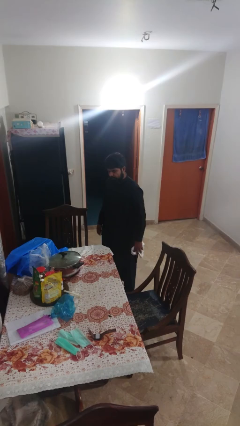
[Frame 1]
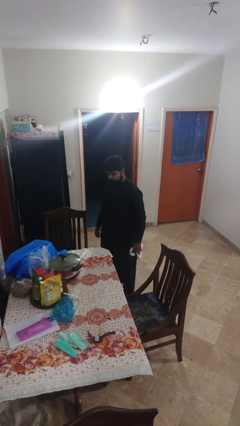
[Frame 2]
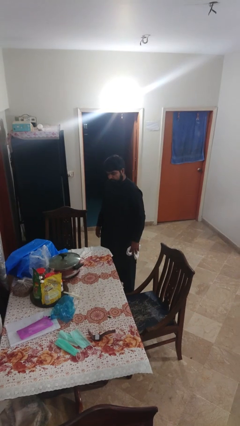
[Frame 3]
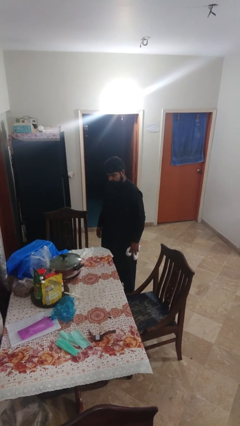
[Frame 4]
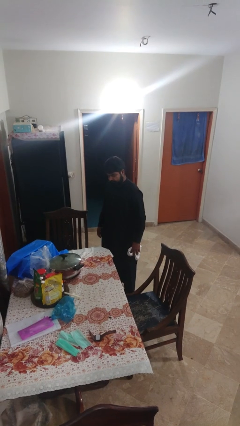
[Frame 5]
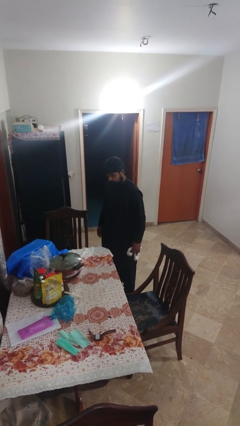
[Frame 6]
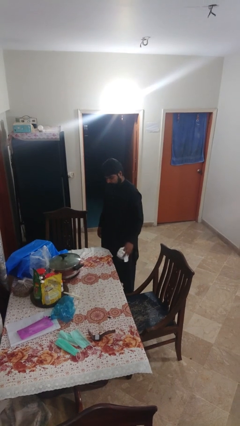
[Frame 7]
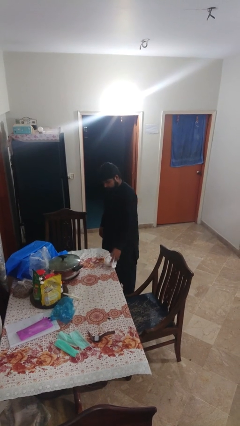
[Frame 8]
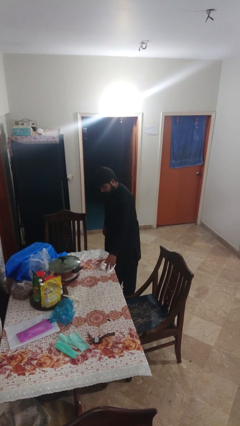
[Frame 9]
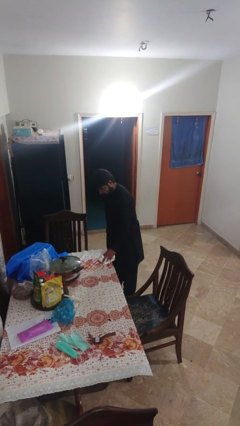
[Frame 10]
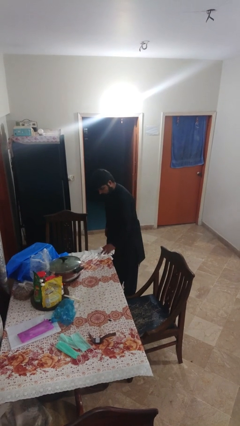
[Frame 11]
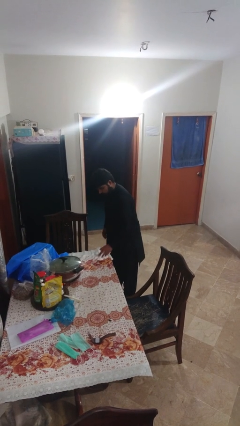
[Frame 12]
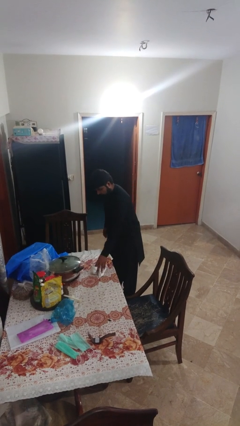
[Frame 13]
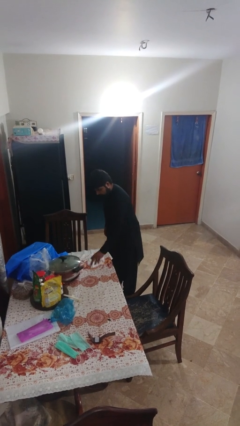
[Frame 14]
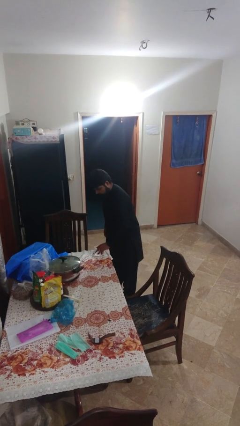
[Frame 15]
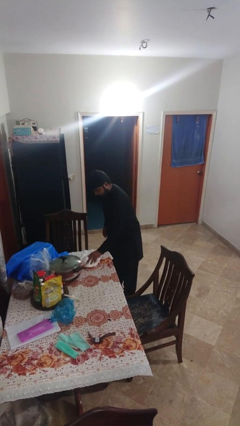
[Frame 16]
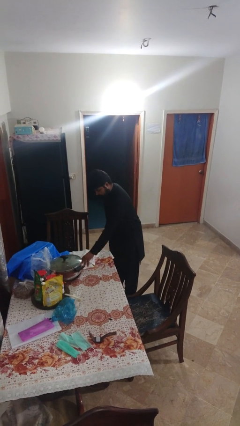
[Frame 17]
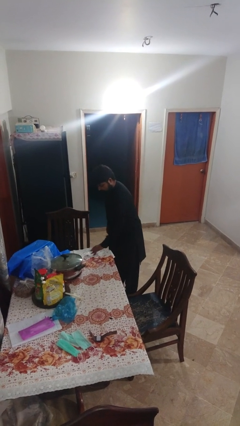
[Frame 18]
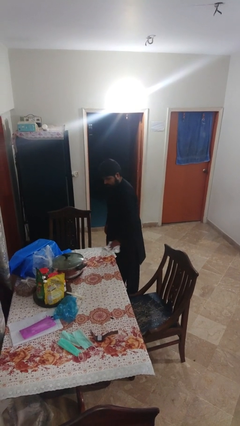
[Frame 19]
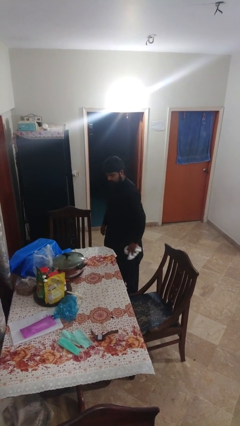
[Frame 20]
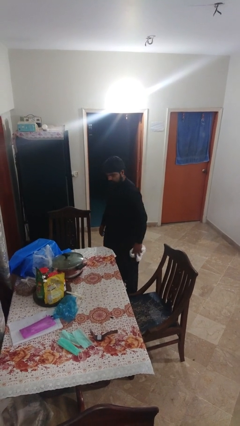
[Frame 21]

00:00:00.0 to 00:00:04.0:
person cleans table with rag

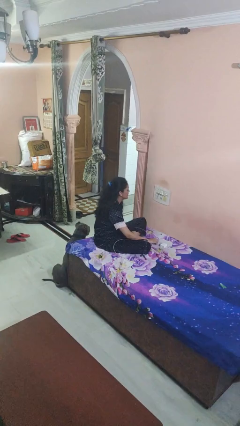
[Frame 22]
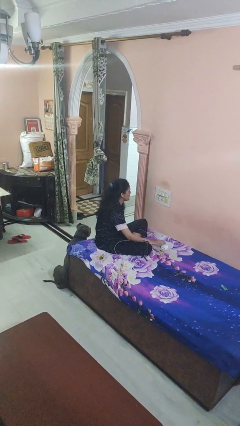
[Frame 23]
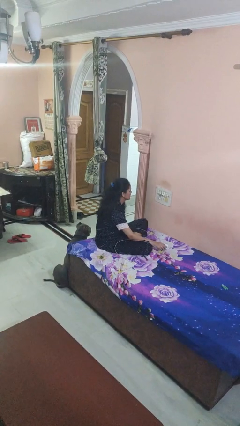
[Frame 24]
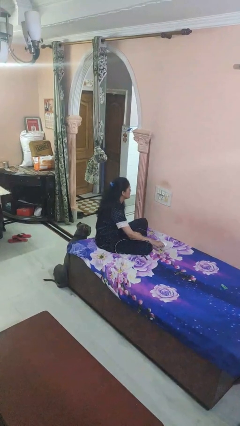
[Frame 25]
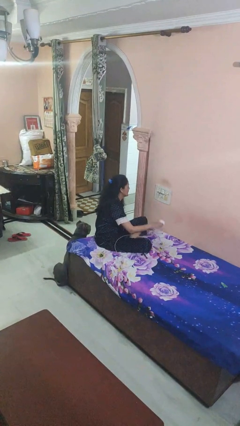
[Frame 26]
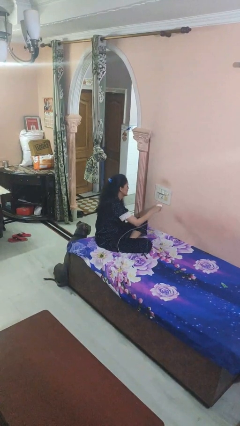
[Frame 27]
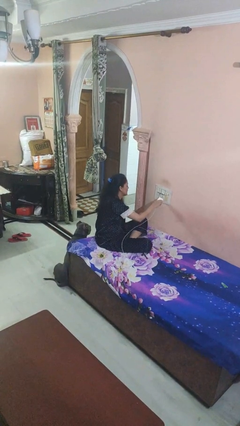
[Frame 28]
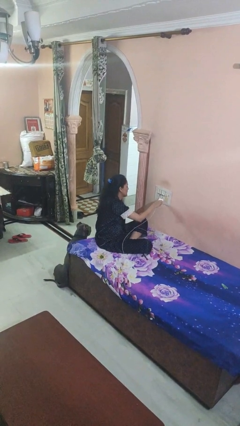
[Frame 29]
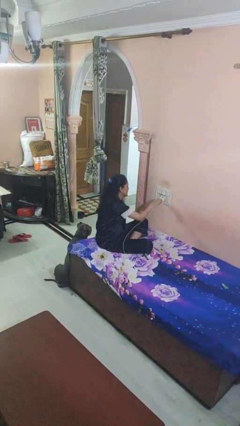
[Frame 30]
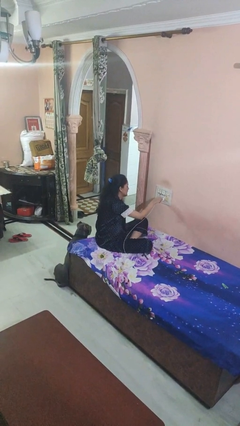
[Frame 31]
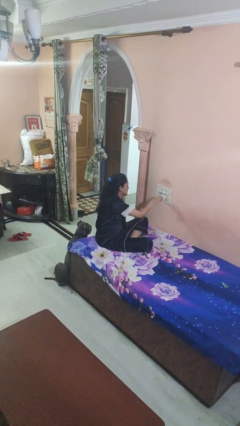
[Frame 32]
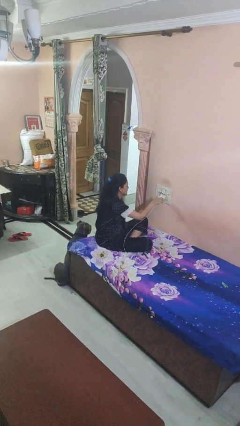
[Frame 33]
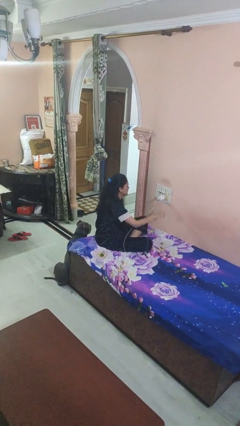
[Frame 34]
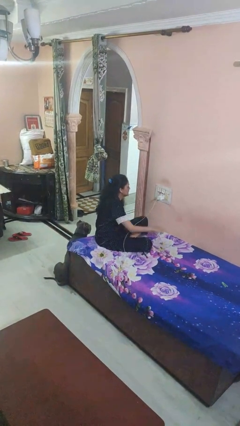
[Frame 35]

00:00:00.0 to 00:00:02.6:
person plugs into electrical socket

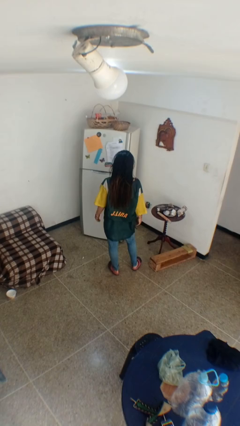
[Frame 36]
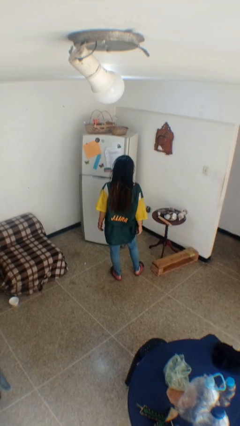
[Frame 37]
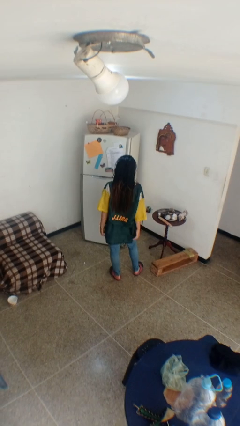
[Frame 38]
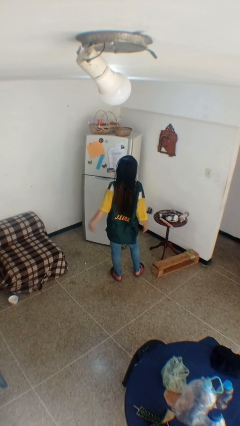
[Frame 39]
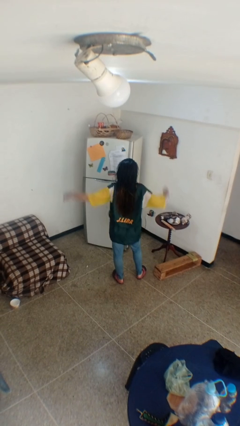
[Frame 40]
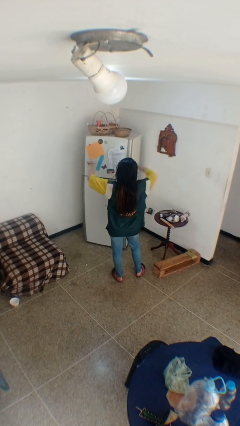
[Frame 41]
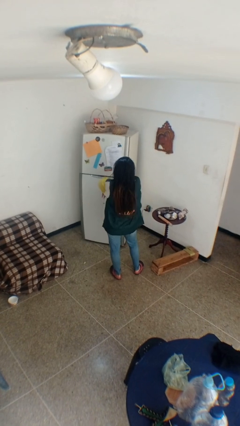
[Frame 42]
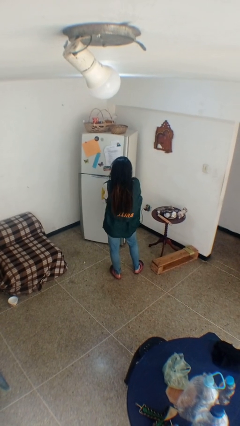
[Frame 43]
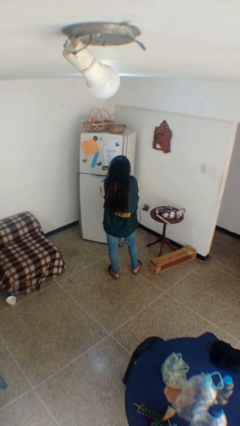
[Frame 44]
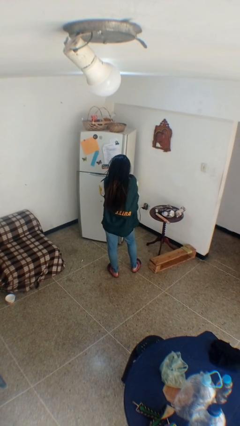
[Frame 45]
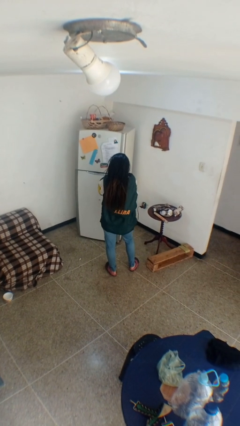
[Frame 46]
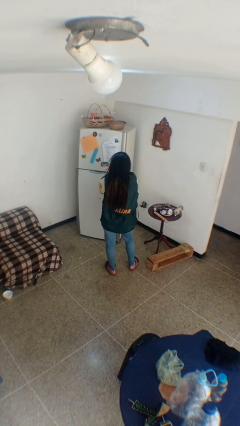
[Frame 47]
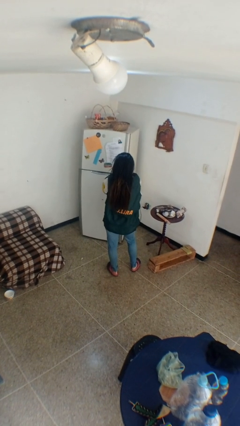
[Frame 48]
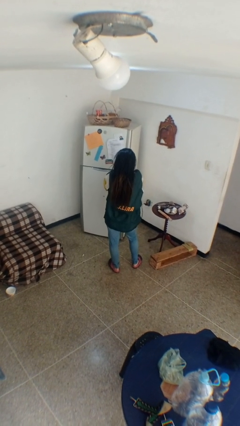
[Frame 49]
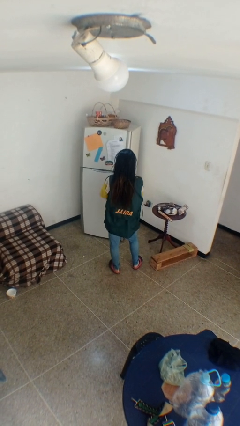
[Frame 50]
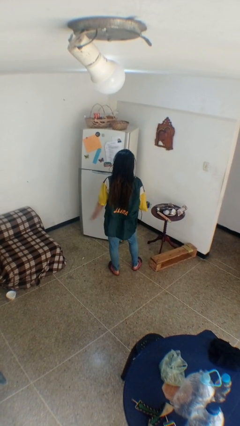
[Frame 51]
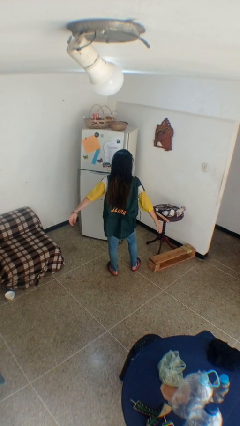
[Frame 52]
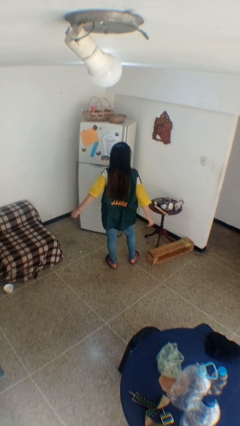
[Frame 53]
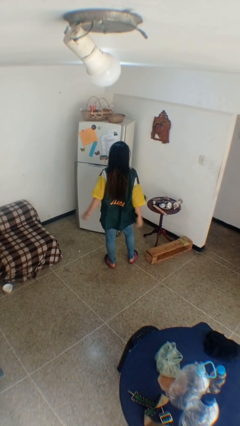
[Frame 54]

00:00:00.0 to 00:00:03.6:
person gestures arms x

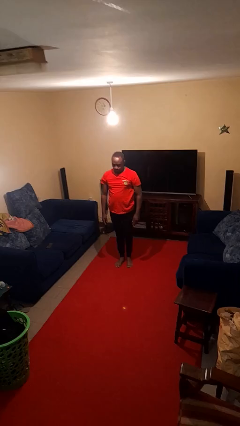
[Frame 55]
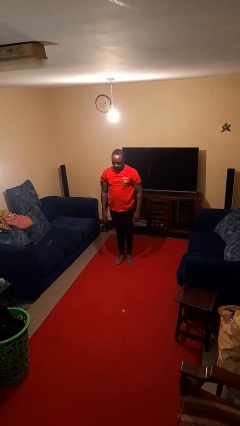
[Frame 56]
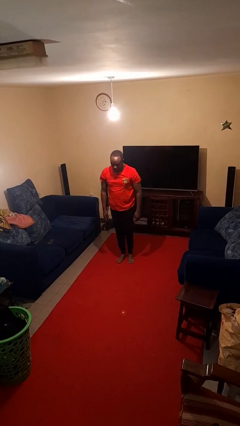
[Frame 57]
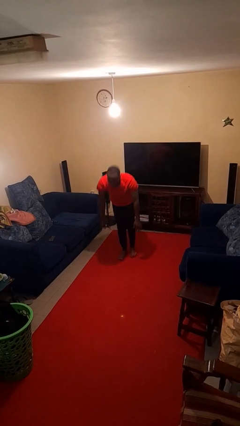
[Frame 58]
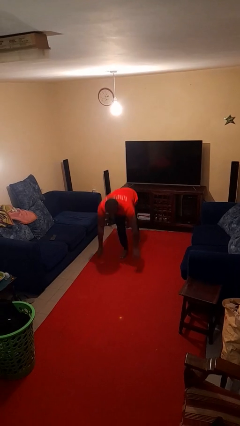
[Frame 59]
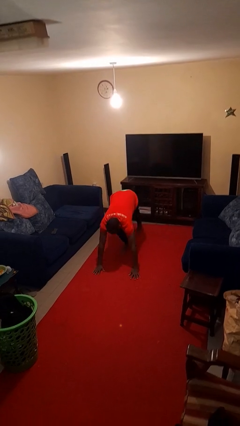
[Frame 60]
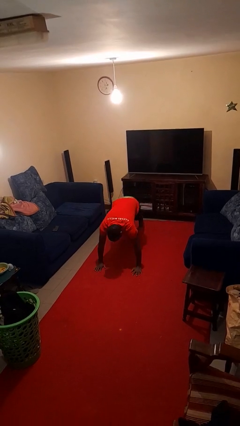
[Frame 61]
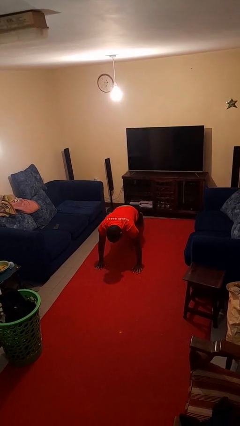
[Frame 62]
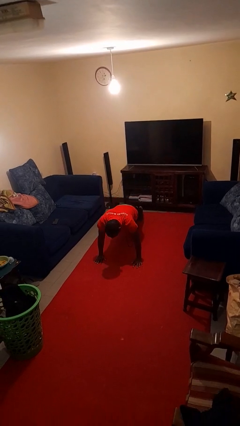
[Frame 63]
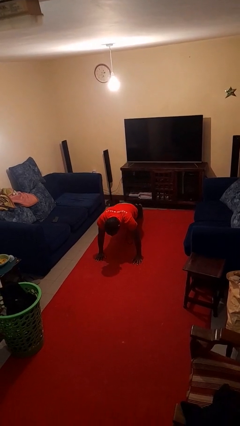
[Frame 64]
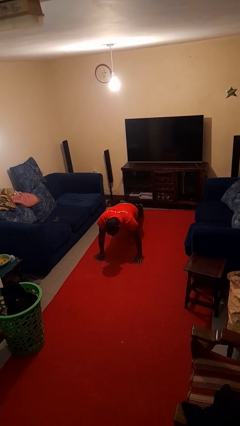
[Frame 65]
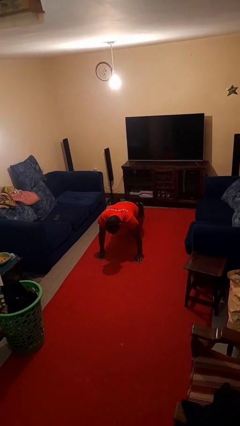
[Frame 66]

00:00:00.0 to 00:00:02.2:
person exercises with plank

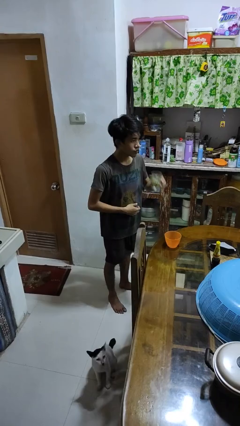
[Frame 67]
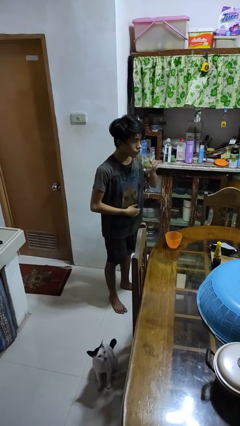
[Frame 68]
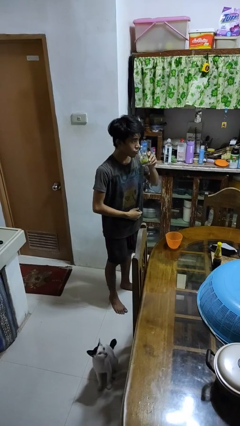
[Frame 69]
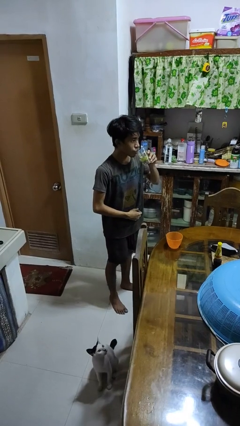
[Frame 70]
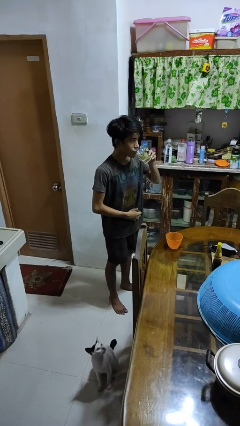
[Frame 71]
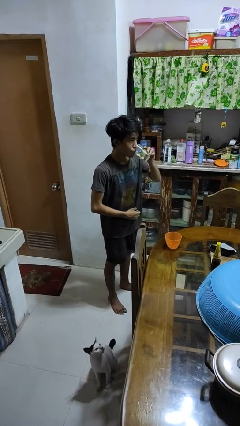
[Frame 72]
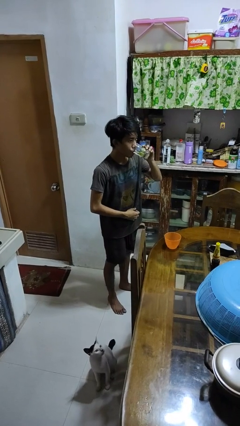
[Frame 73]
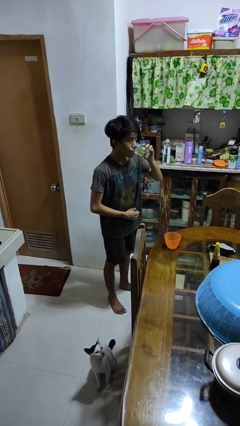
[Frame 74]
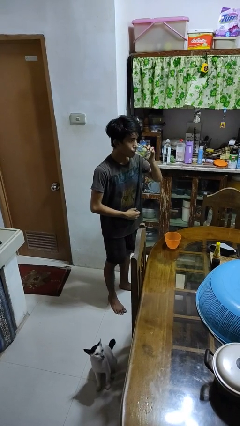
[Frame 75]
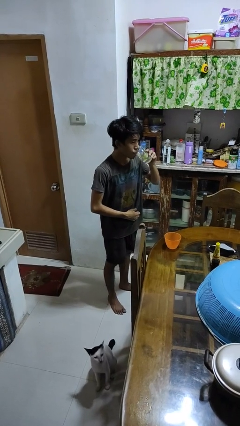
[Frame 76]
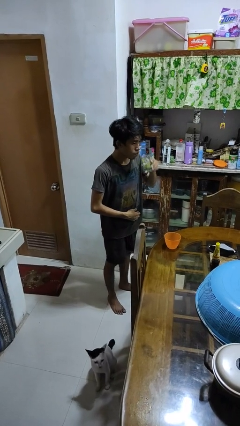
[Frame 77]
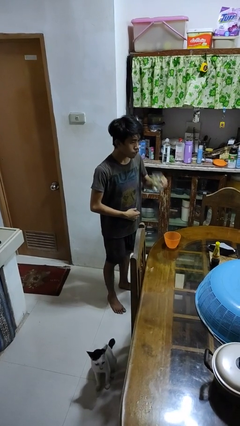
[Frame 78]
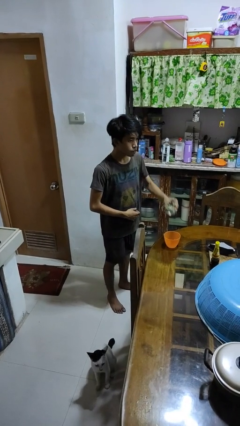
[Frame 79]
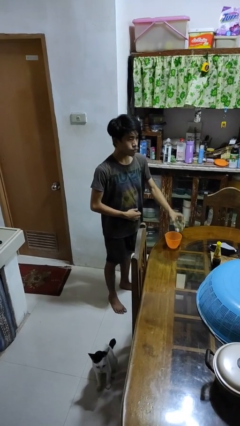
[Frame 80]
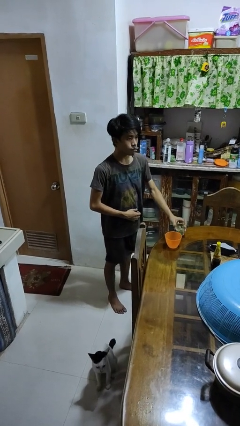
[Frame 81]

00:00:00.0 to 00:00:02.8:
person drinks from cup

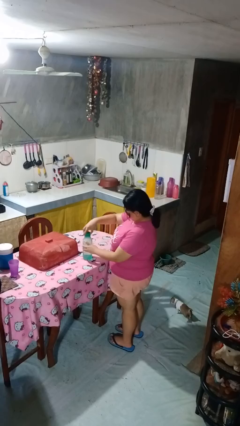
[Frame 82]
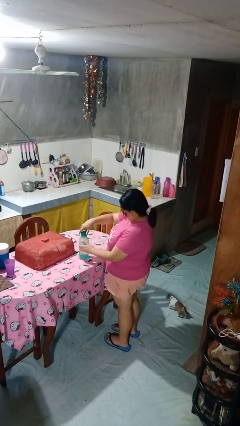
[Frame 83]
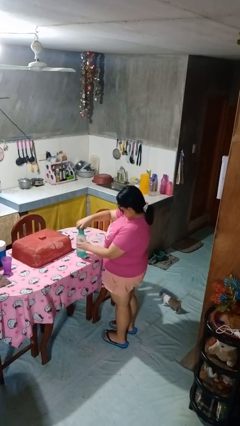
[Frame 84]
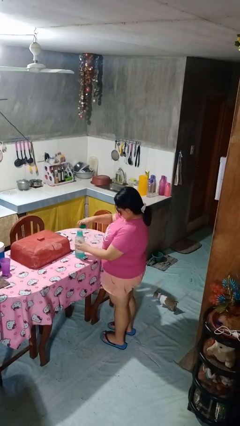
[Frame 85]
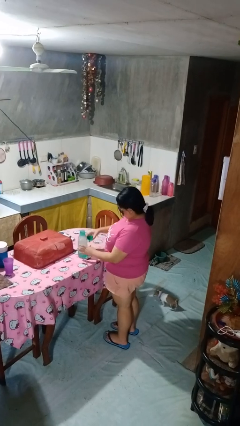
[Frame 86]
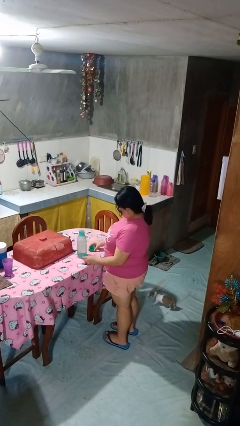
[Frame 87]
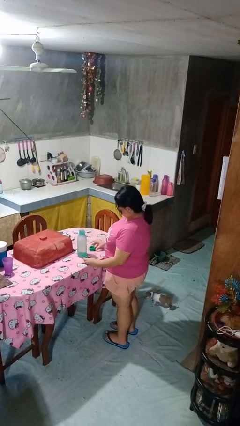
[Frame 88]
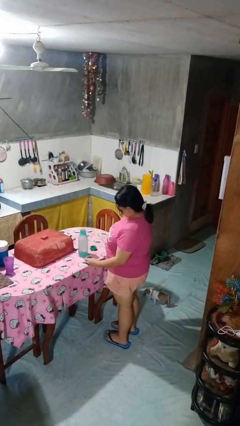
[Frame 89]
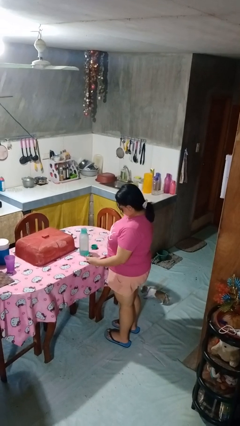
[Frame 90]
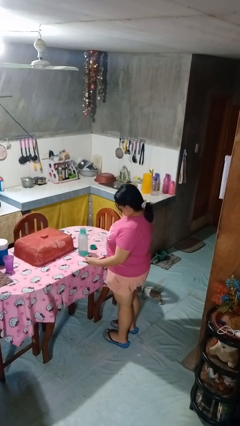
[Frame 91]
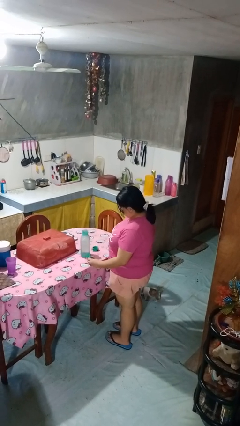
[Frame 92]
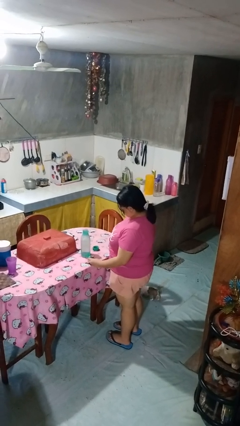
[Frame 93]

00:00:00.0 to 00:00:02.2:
person unscrews lid from bottle
